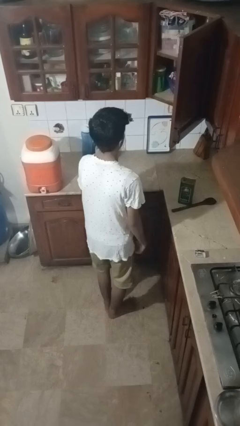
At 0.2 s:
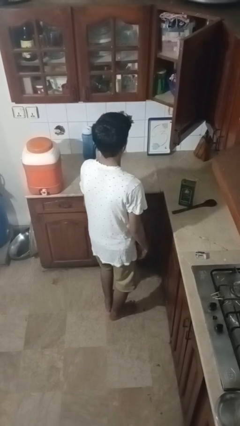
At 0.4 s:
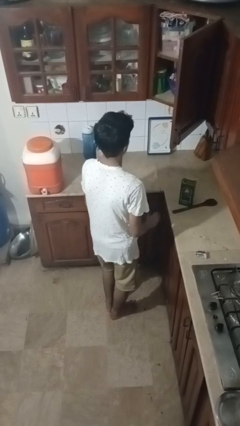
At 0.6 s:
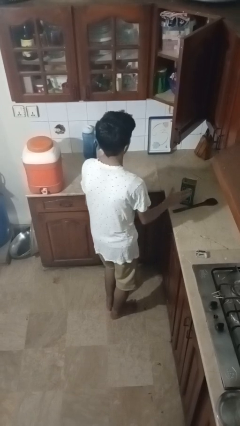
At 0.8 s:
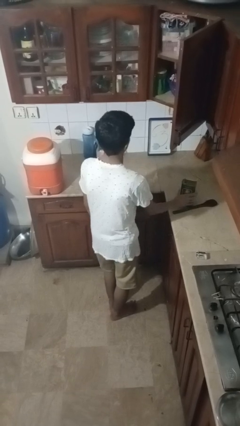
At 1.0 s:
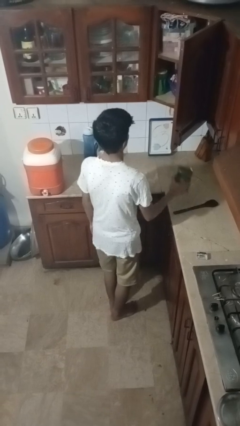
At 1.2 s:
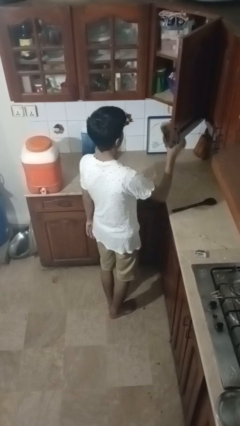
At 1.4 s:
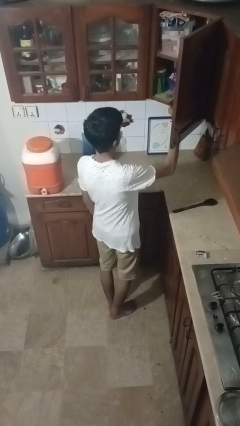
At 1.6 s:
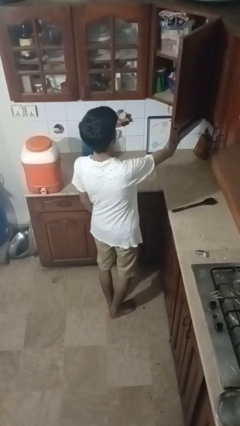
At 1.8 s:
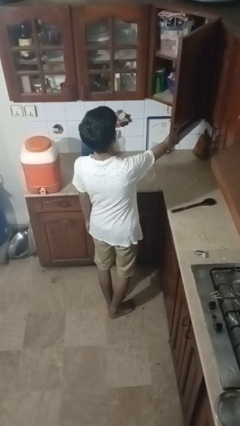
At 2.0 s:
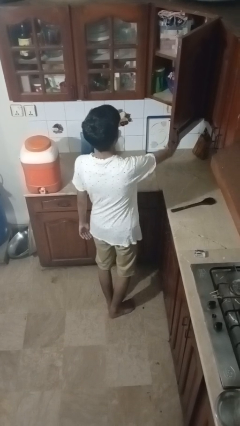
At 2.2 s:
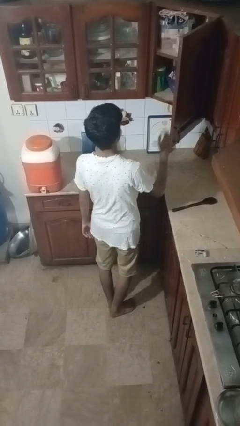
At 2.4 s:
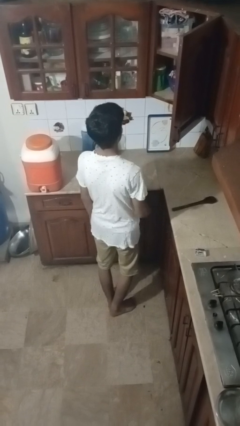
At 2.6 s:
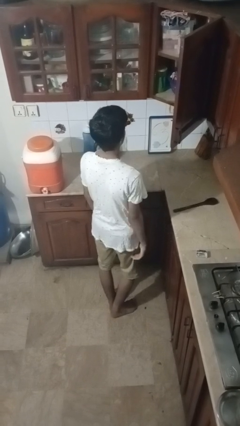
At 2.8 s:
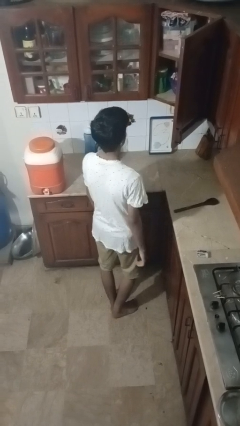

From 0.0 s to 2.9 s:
person puts object in cabinet

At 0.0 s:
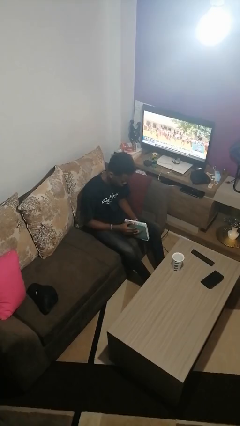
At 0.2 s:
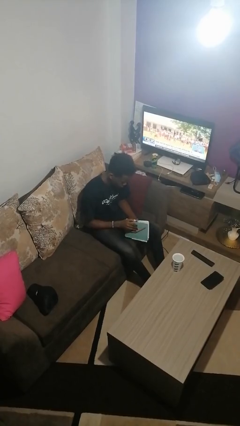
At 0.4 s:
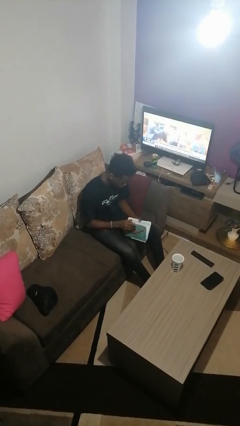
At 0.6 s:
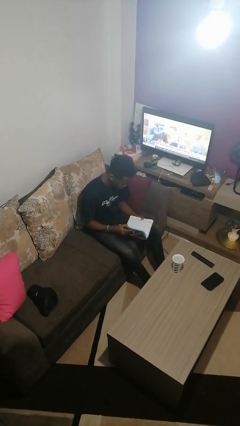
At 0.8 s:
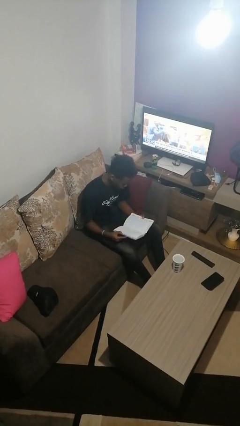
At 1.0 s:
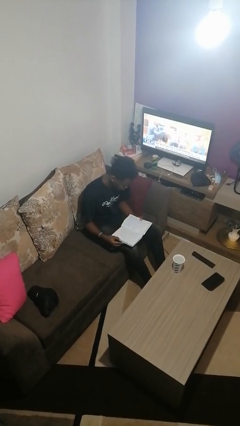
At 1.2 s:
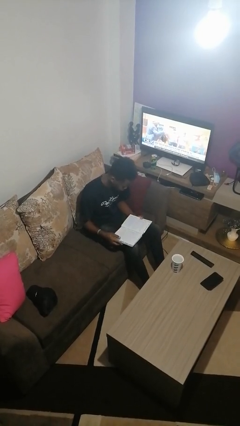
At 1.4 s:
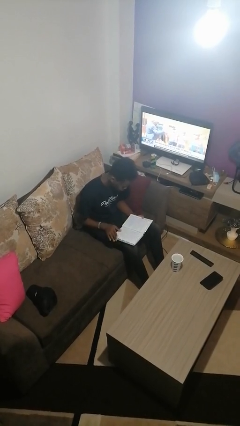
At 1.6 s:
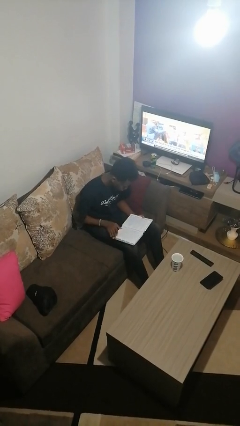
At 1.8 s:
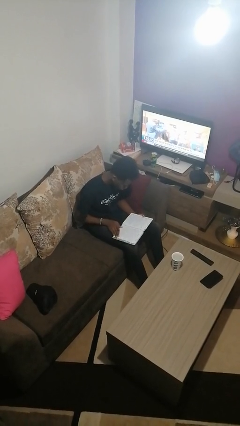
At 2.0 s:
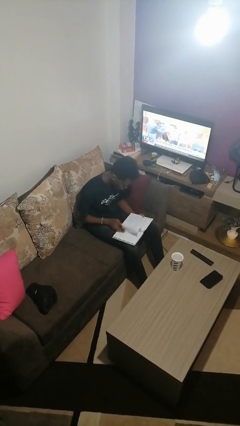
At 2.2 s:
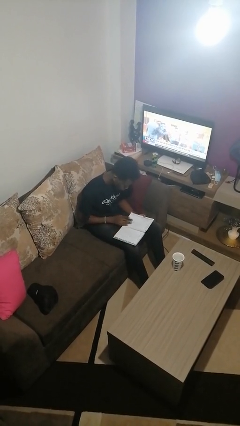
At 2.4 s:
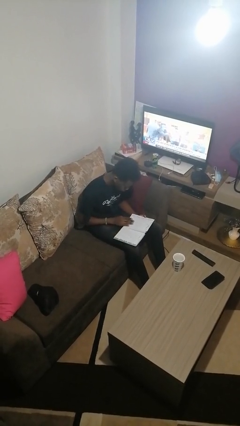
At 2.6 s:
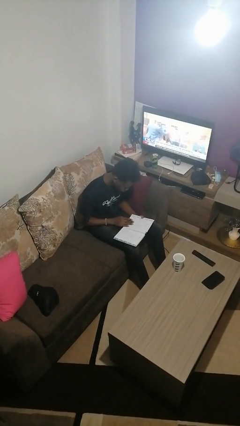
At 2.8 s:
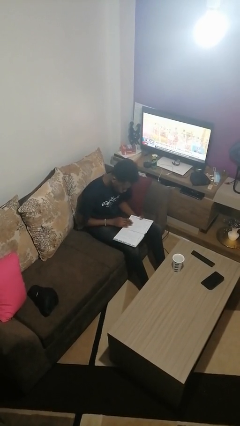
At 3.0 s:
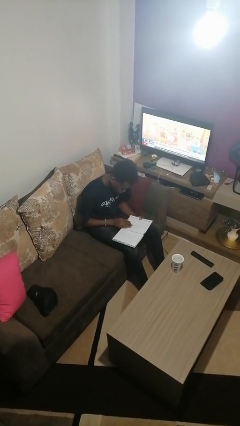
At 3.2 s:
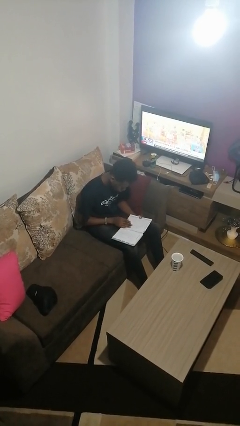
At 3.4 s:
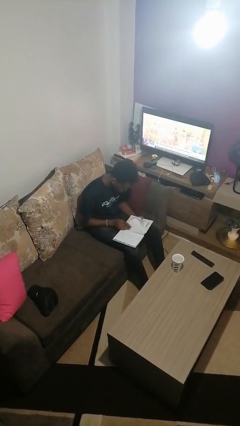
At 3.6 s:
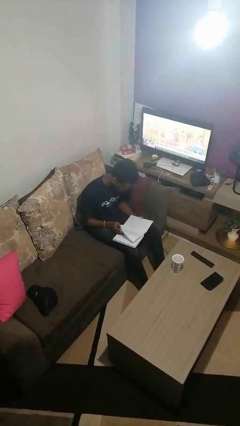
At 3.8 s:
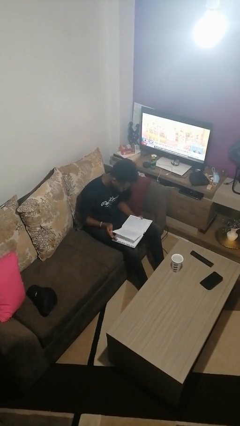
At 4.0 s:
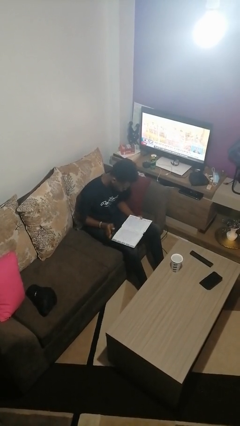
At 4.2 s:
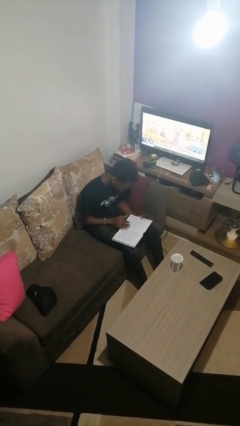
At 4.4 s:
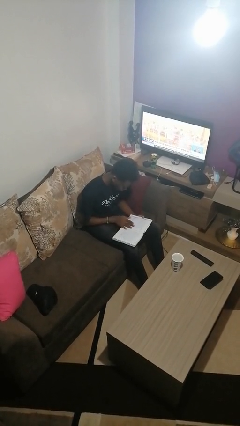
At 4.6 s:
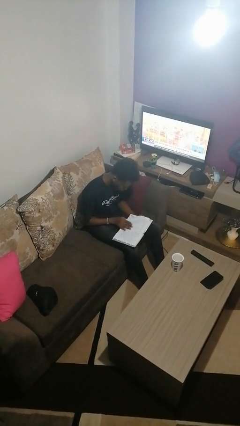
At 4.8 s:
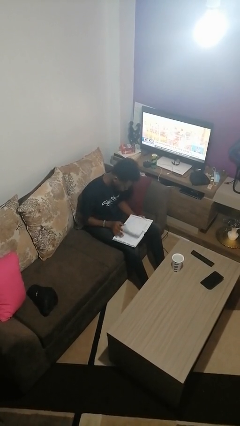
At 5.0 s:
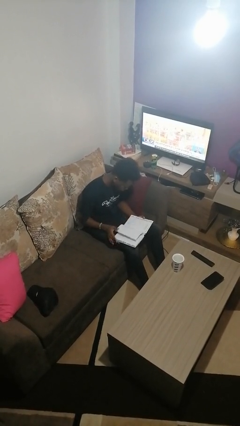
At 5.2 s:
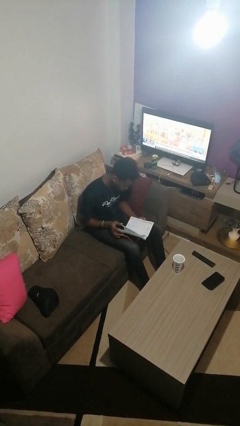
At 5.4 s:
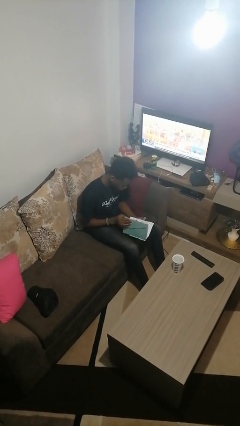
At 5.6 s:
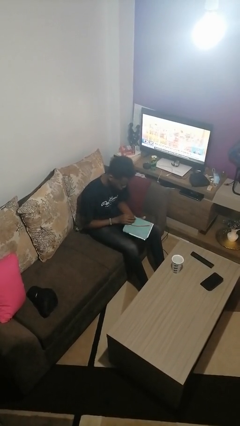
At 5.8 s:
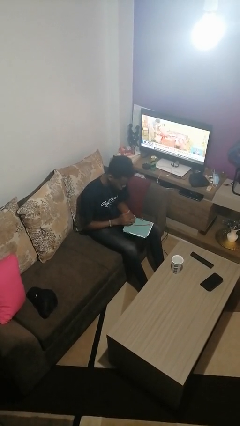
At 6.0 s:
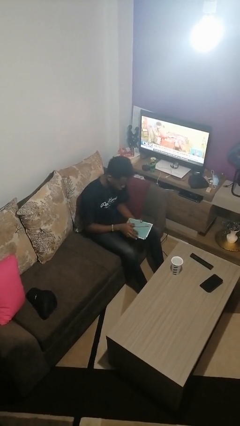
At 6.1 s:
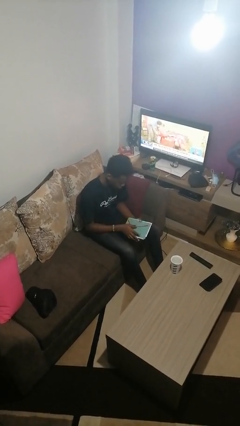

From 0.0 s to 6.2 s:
person reads book

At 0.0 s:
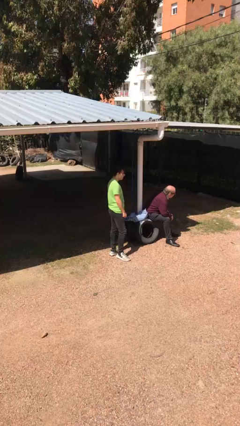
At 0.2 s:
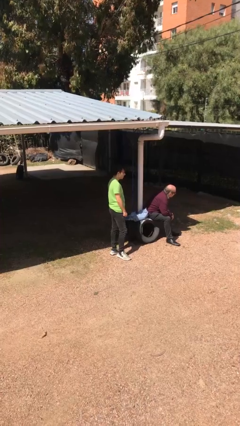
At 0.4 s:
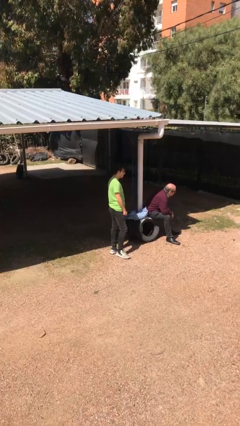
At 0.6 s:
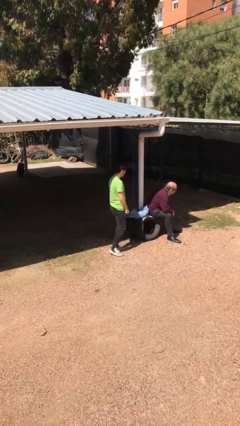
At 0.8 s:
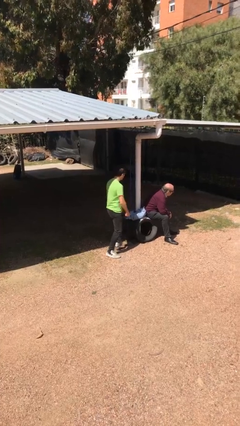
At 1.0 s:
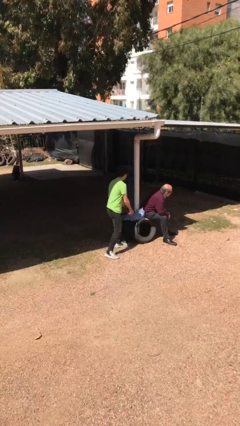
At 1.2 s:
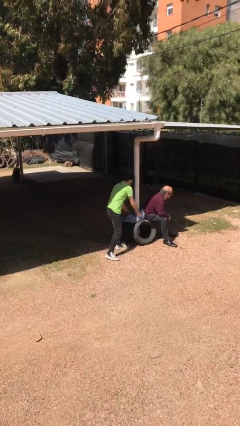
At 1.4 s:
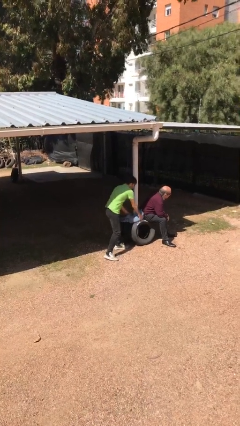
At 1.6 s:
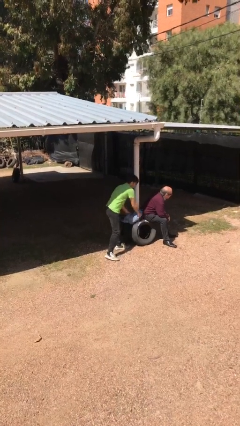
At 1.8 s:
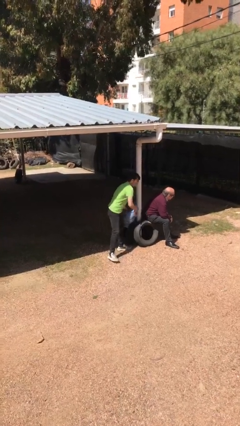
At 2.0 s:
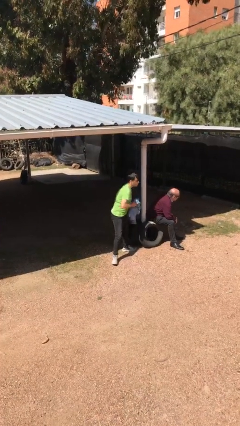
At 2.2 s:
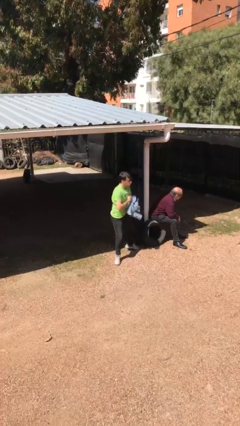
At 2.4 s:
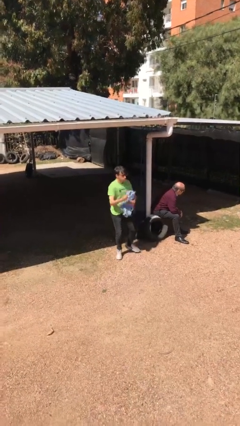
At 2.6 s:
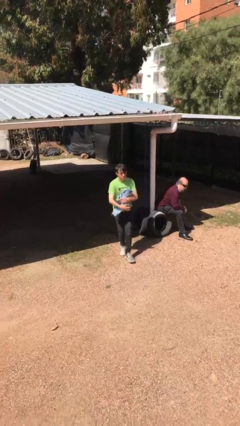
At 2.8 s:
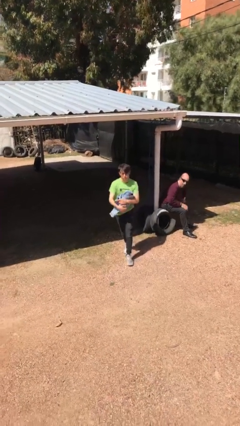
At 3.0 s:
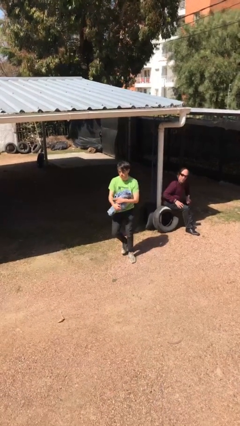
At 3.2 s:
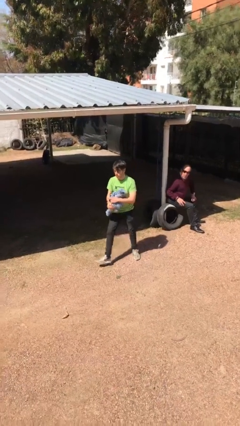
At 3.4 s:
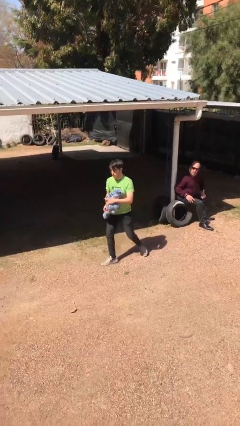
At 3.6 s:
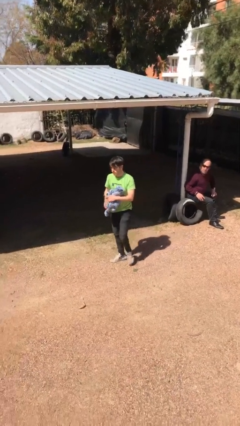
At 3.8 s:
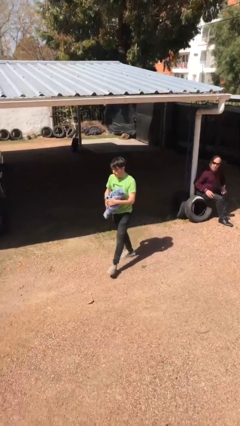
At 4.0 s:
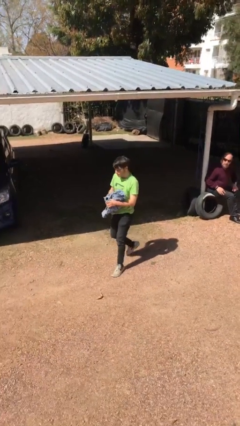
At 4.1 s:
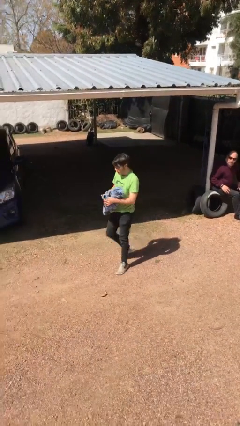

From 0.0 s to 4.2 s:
person steals object from person

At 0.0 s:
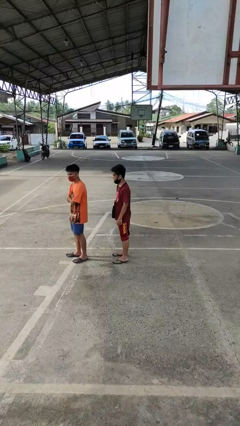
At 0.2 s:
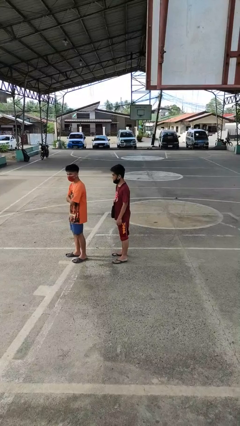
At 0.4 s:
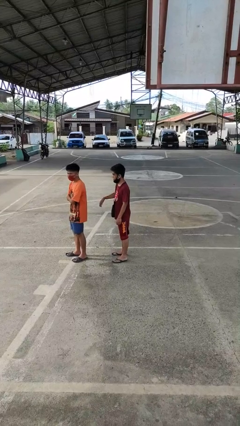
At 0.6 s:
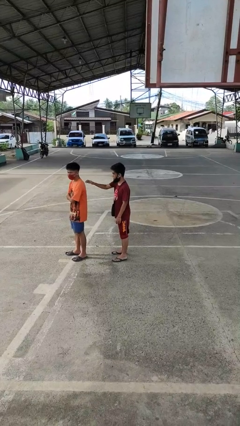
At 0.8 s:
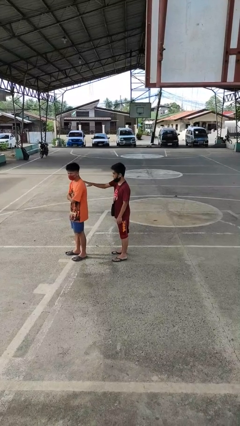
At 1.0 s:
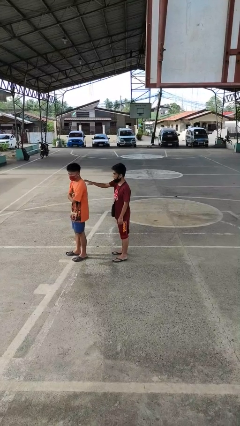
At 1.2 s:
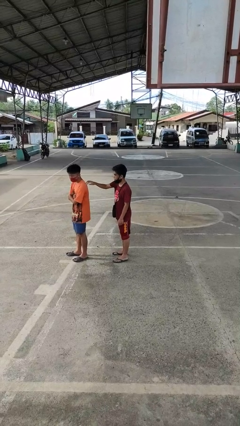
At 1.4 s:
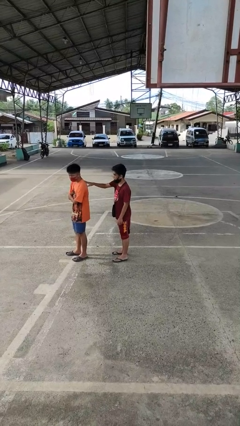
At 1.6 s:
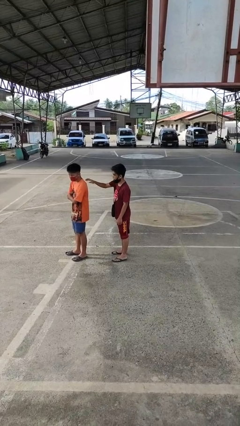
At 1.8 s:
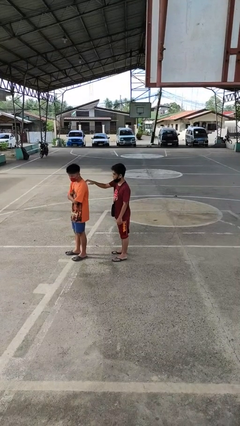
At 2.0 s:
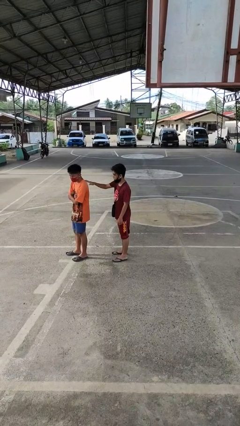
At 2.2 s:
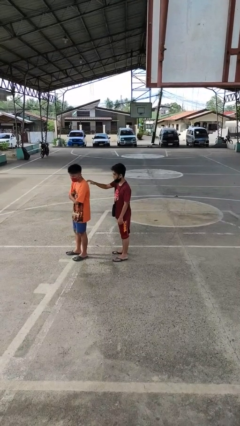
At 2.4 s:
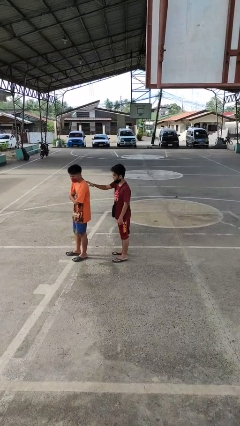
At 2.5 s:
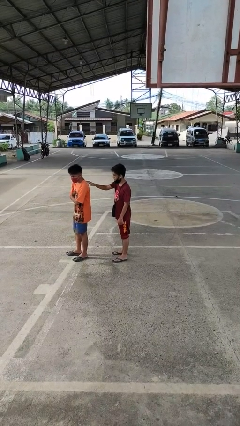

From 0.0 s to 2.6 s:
person touches back of person

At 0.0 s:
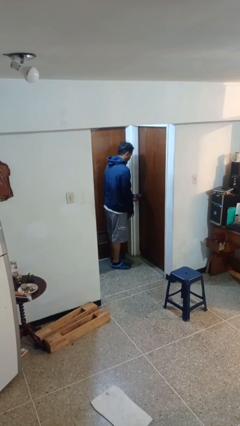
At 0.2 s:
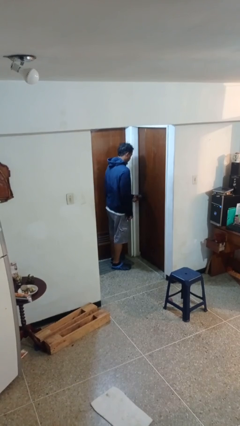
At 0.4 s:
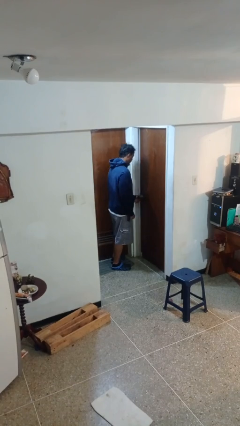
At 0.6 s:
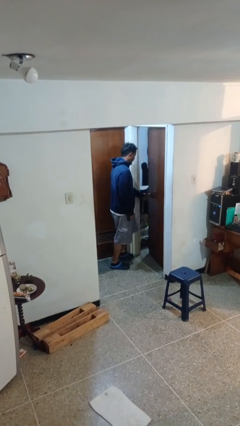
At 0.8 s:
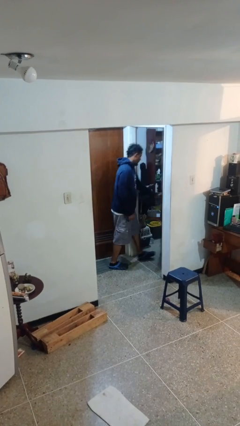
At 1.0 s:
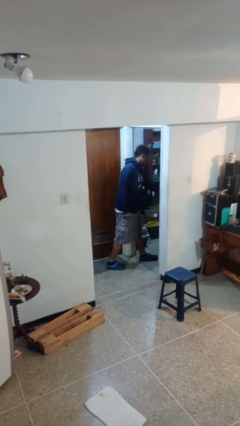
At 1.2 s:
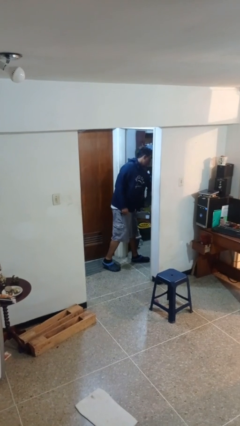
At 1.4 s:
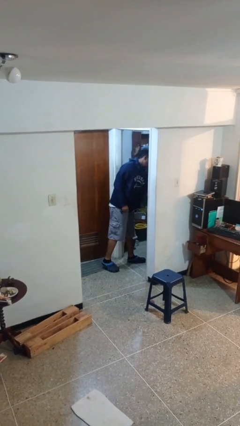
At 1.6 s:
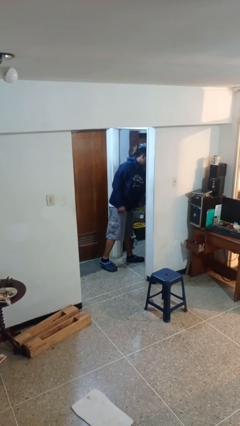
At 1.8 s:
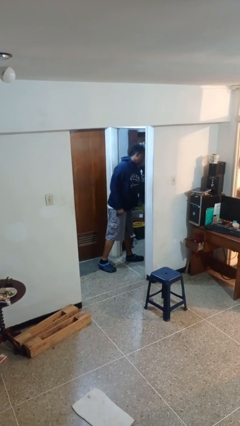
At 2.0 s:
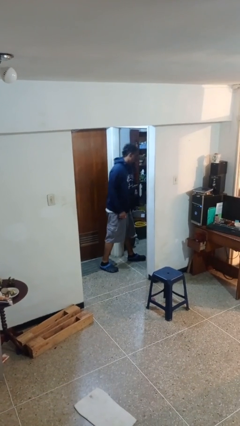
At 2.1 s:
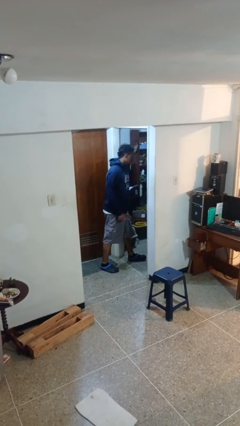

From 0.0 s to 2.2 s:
person opens facility door
